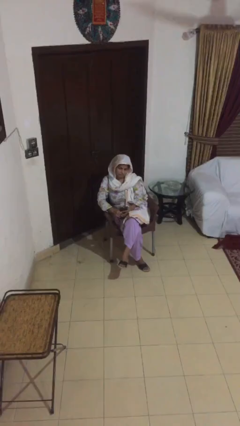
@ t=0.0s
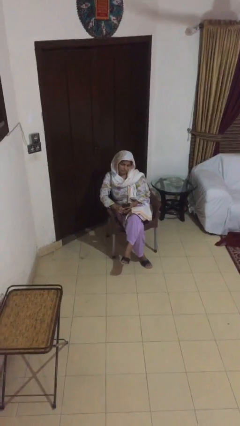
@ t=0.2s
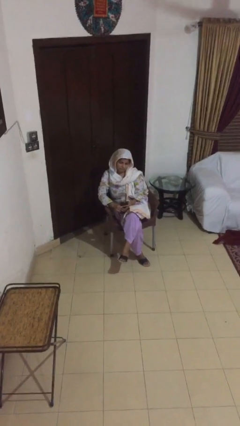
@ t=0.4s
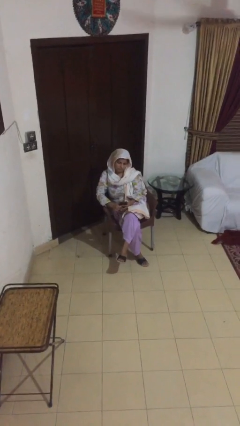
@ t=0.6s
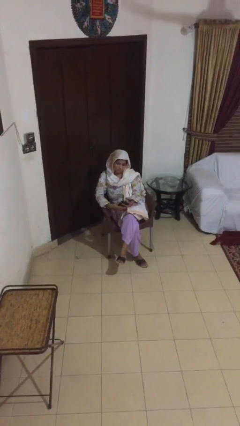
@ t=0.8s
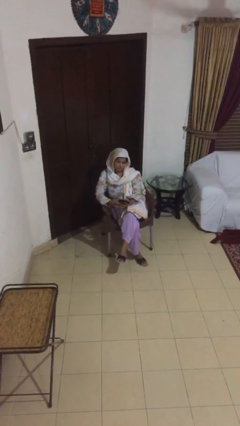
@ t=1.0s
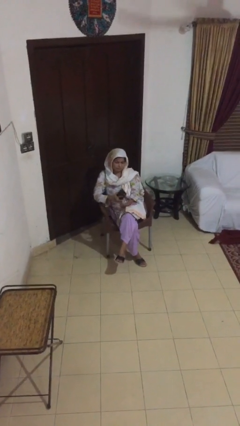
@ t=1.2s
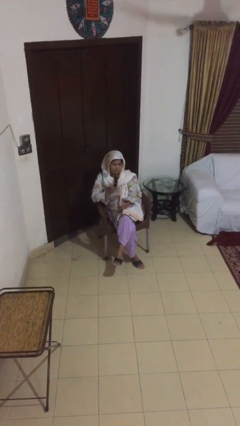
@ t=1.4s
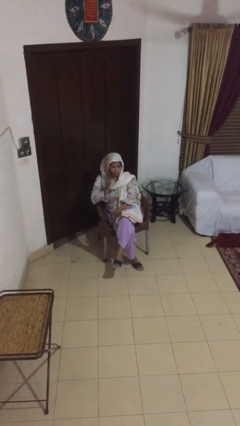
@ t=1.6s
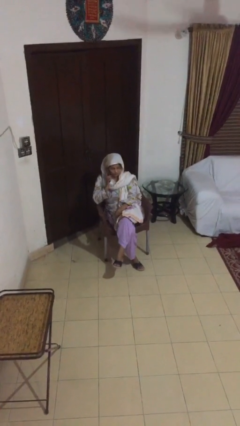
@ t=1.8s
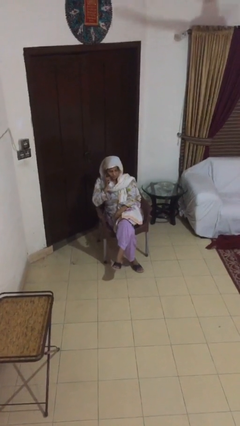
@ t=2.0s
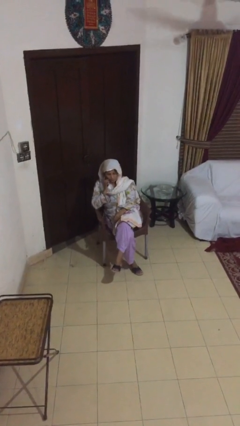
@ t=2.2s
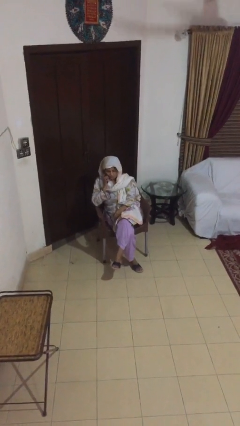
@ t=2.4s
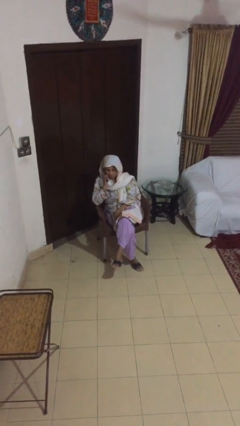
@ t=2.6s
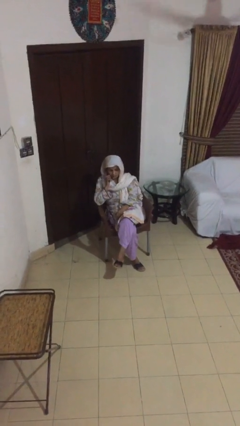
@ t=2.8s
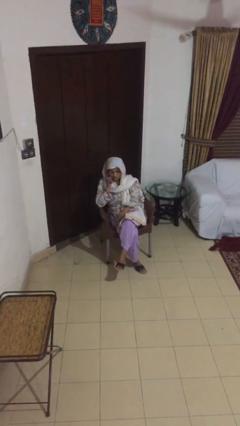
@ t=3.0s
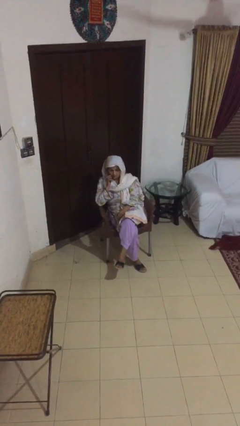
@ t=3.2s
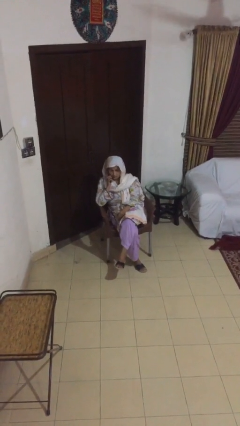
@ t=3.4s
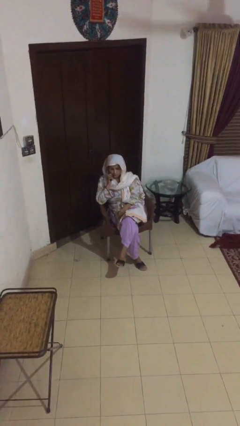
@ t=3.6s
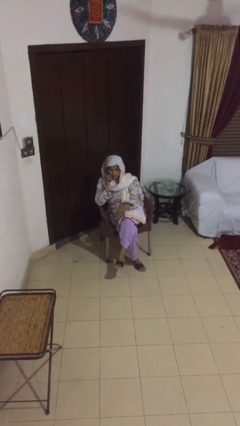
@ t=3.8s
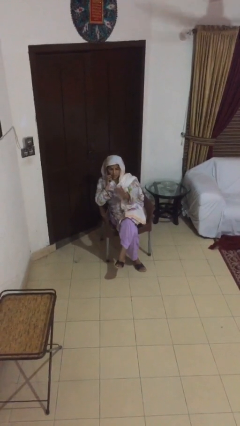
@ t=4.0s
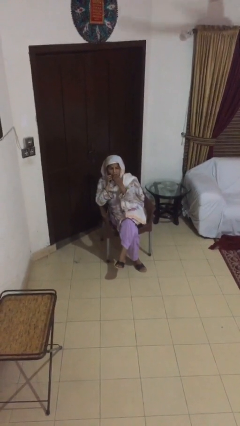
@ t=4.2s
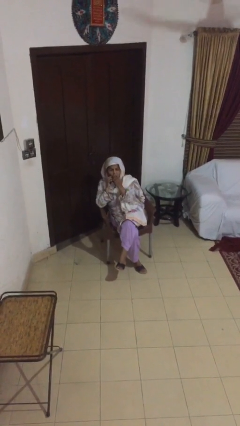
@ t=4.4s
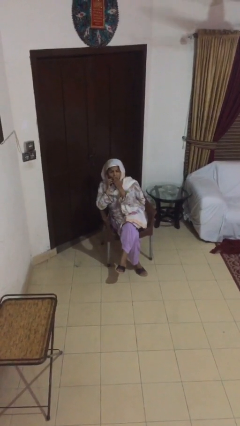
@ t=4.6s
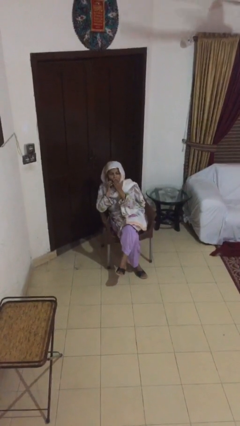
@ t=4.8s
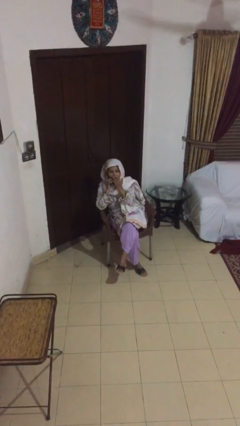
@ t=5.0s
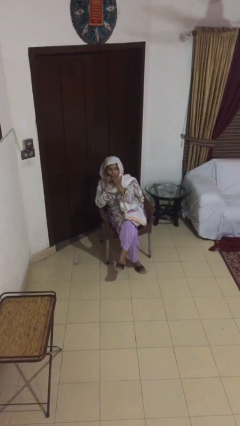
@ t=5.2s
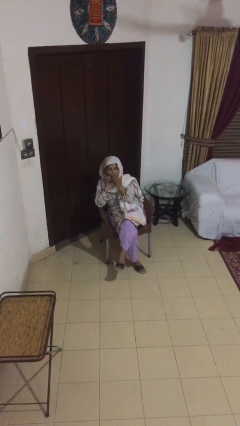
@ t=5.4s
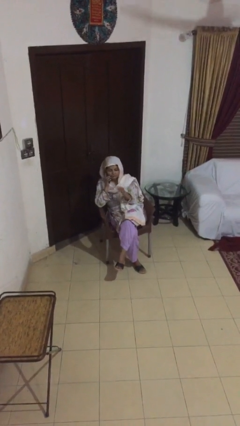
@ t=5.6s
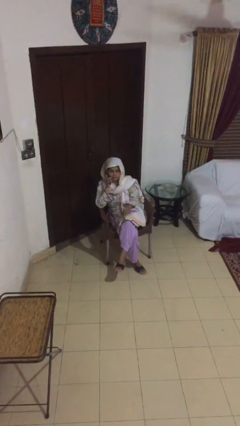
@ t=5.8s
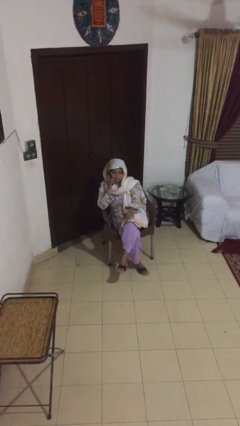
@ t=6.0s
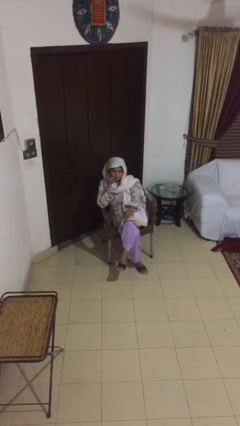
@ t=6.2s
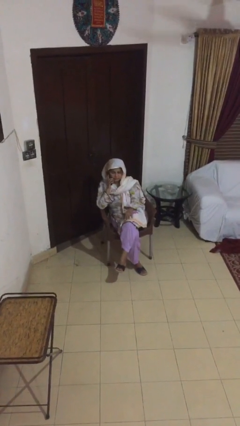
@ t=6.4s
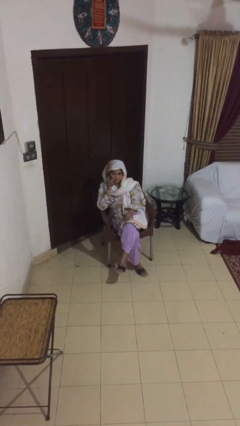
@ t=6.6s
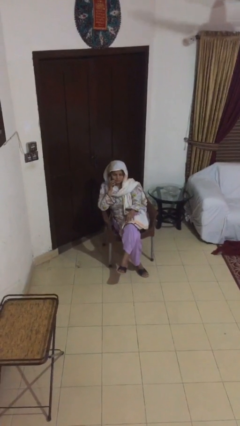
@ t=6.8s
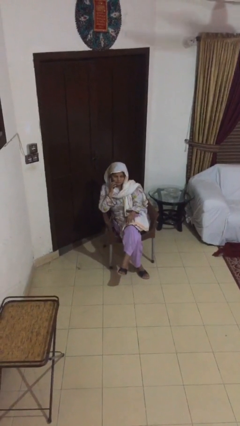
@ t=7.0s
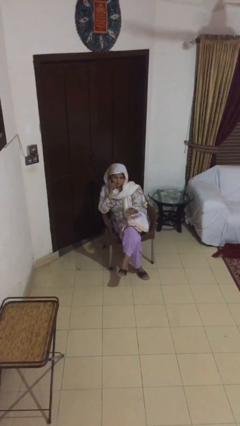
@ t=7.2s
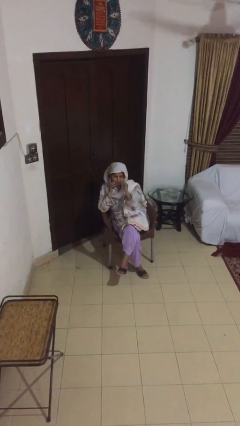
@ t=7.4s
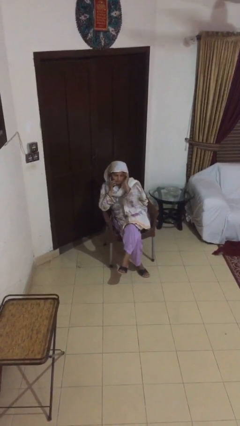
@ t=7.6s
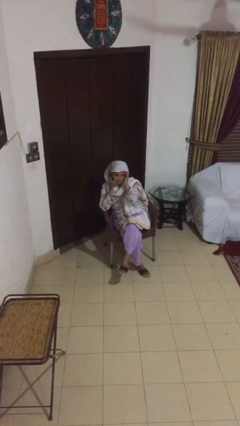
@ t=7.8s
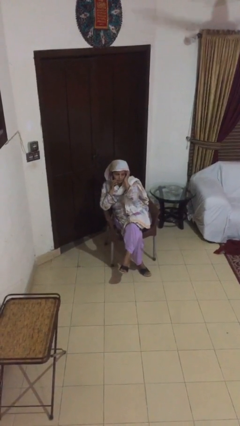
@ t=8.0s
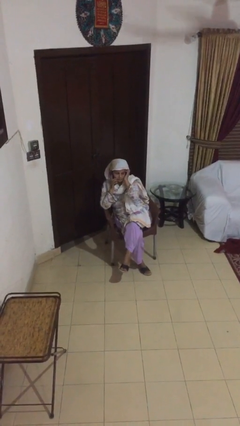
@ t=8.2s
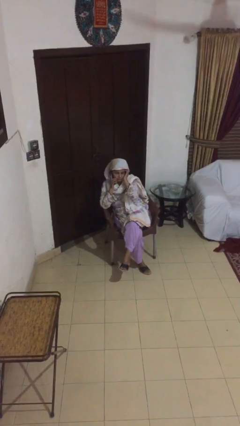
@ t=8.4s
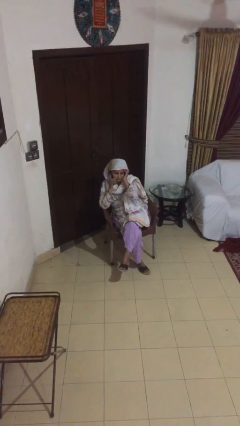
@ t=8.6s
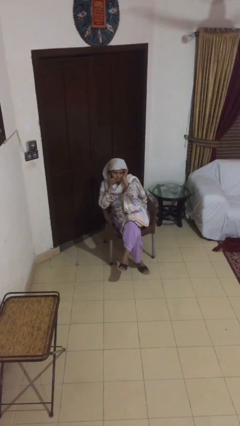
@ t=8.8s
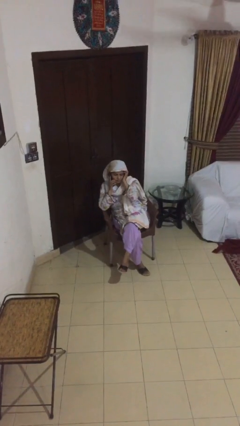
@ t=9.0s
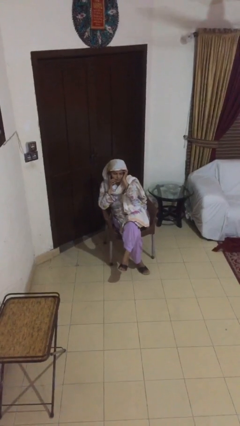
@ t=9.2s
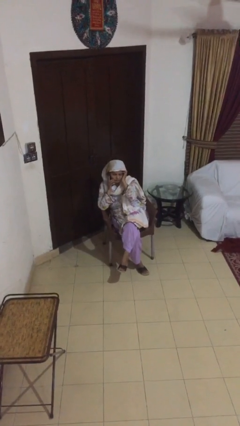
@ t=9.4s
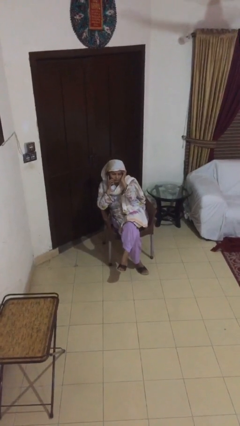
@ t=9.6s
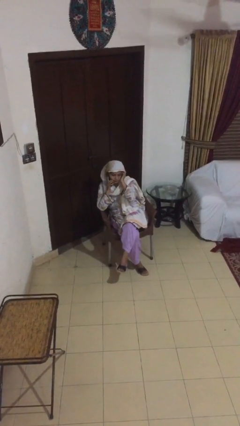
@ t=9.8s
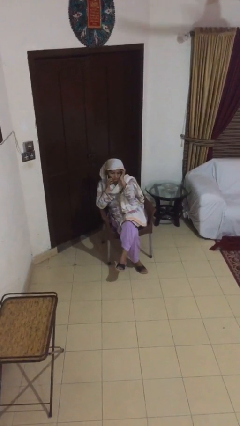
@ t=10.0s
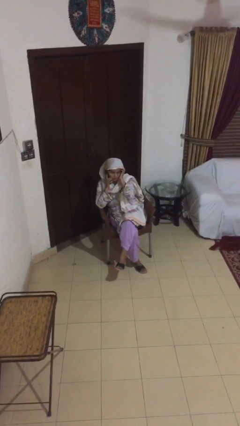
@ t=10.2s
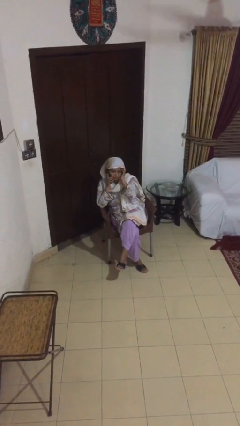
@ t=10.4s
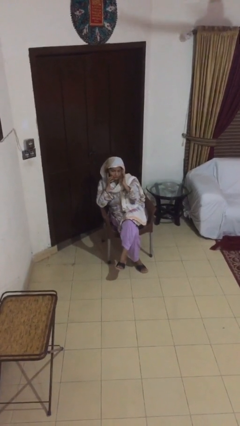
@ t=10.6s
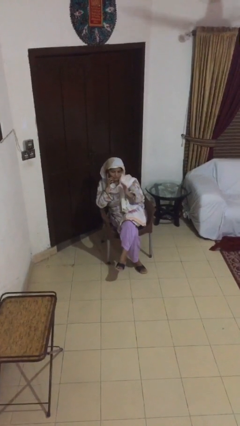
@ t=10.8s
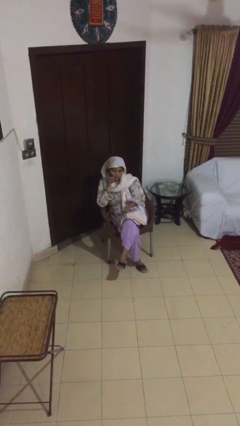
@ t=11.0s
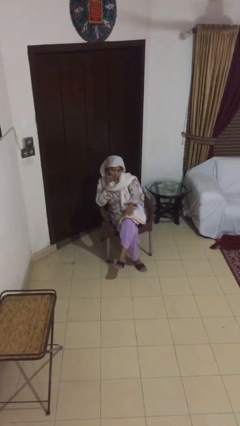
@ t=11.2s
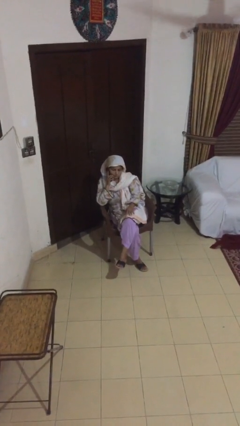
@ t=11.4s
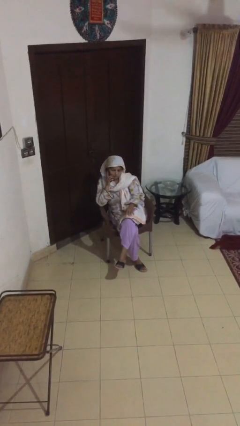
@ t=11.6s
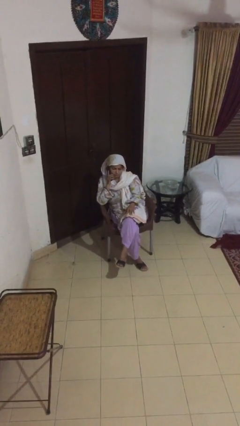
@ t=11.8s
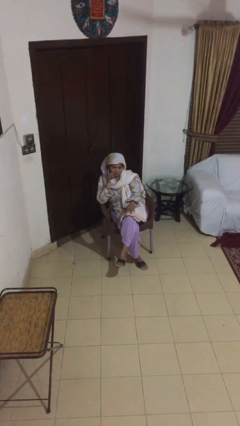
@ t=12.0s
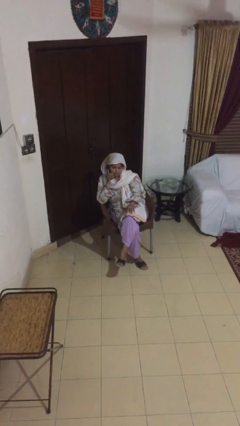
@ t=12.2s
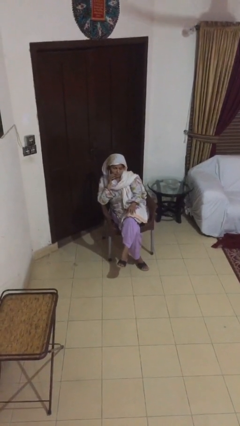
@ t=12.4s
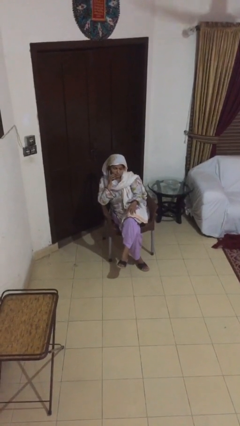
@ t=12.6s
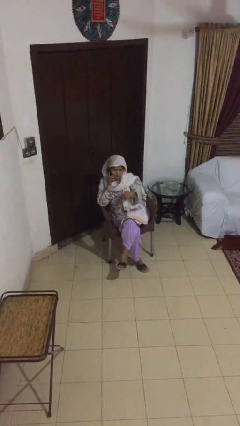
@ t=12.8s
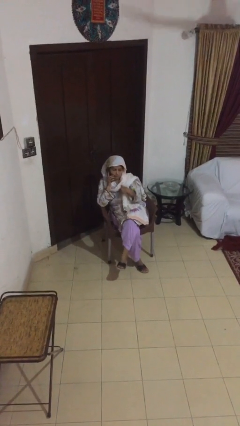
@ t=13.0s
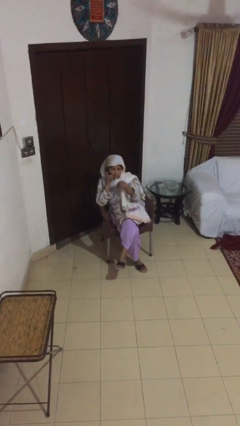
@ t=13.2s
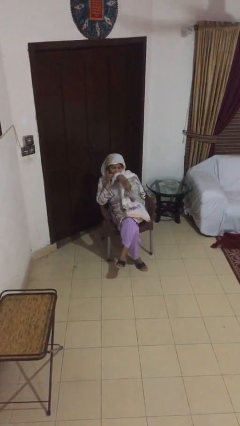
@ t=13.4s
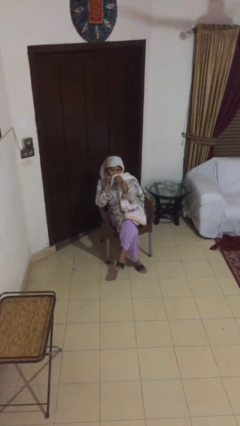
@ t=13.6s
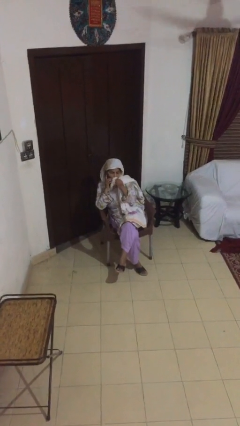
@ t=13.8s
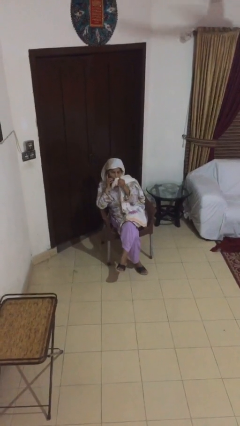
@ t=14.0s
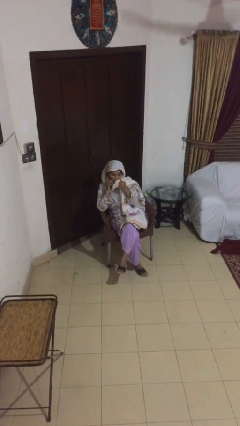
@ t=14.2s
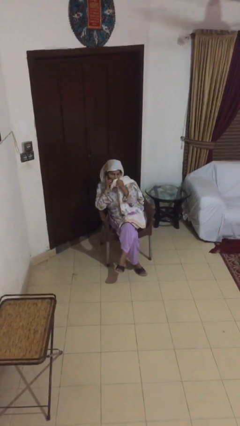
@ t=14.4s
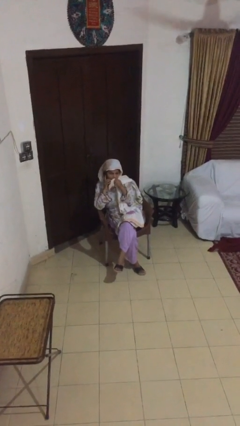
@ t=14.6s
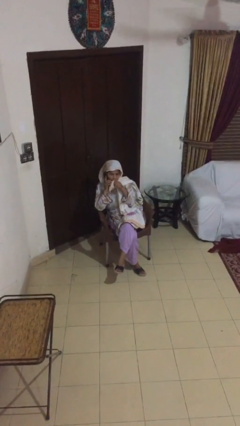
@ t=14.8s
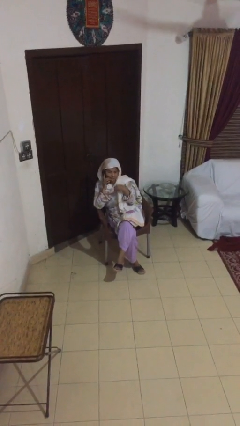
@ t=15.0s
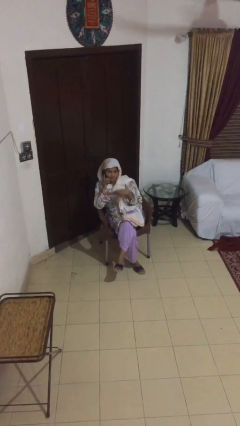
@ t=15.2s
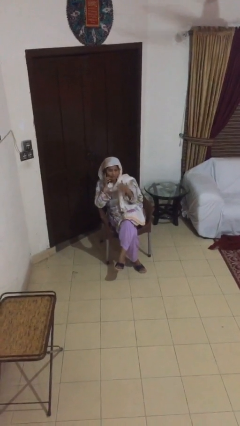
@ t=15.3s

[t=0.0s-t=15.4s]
person talks on phone

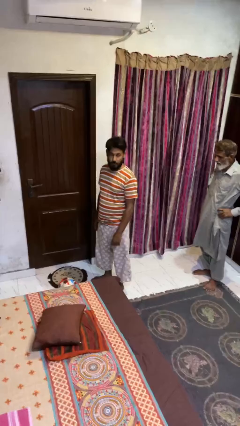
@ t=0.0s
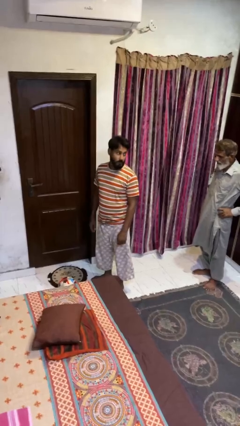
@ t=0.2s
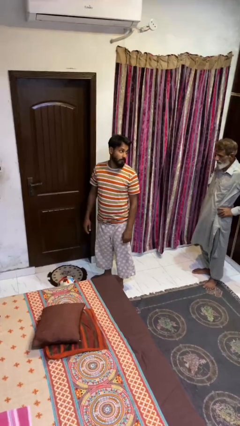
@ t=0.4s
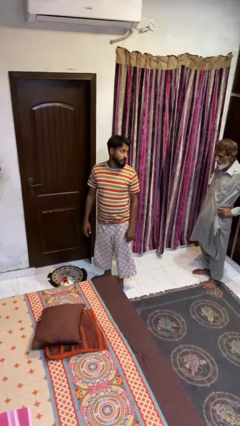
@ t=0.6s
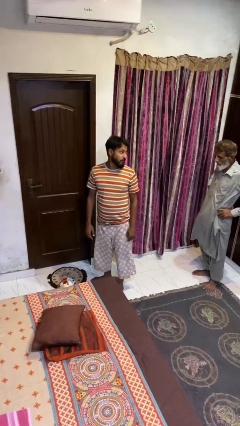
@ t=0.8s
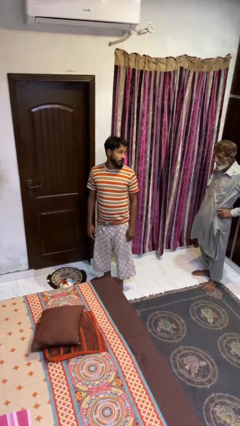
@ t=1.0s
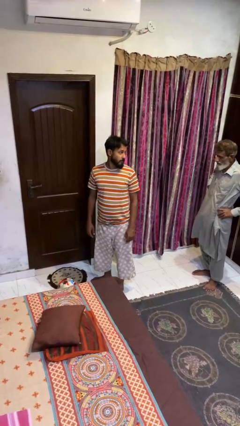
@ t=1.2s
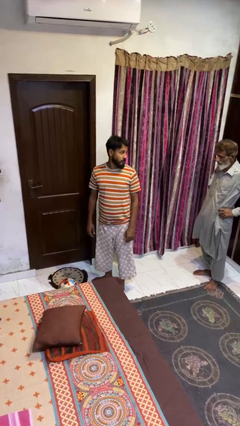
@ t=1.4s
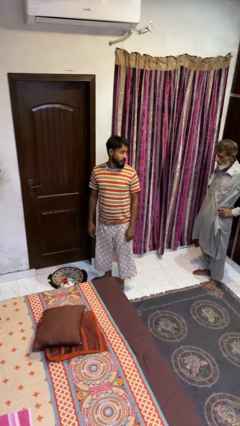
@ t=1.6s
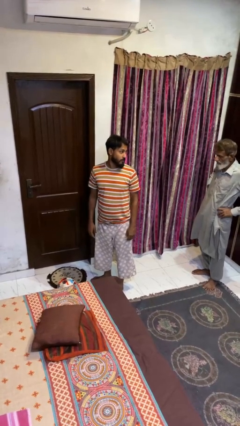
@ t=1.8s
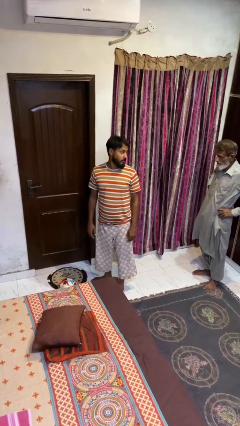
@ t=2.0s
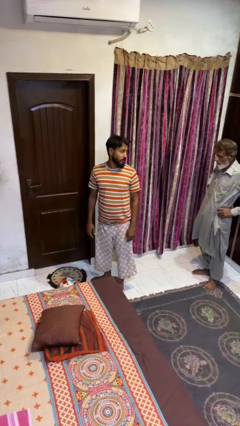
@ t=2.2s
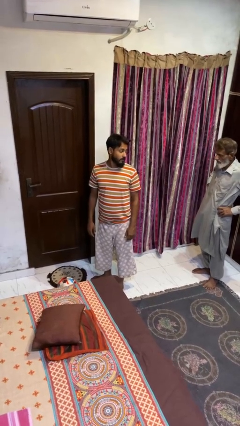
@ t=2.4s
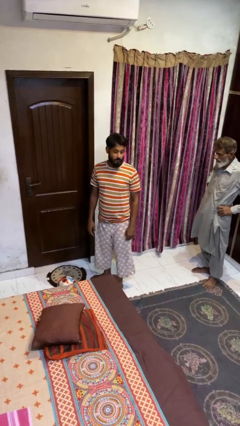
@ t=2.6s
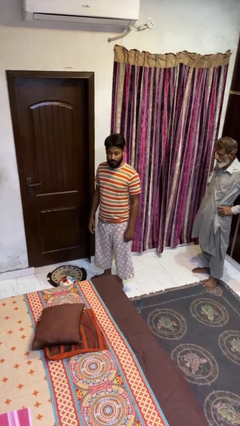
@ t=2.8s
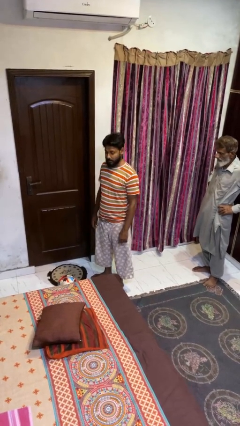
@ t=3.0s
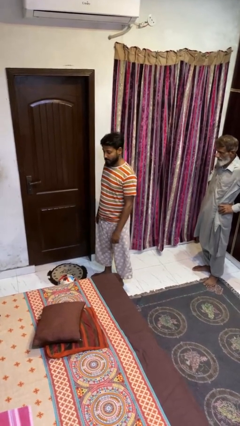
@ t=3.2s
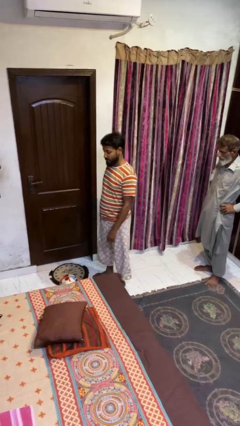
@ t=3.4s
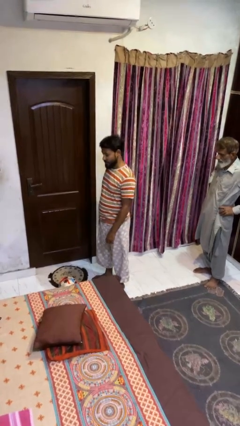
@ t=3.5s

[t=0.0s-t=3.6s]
person looks over shoulder
